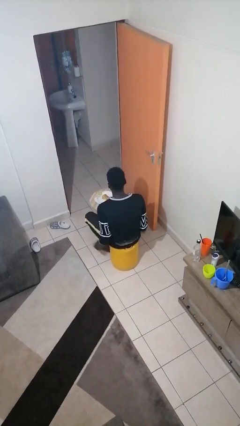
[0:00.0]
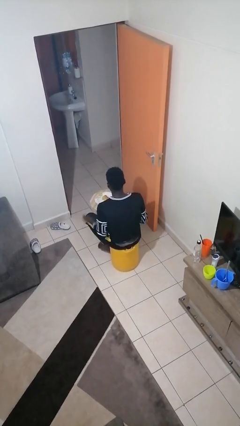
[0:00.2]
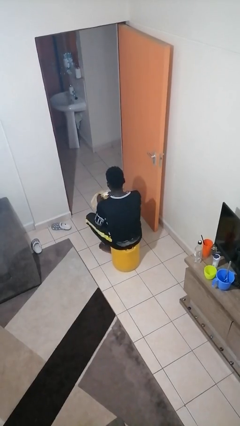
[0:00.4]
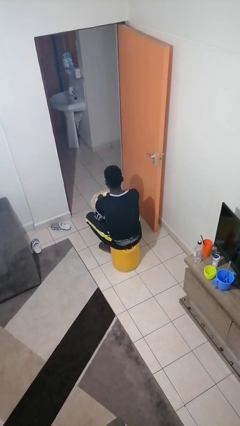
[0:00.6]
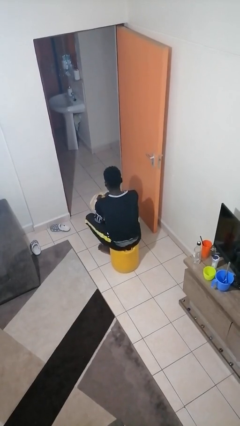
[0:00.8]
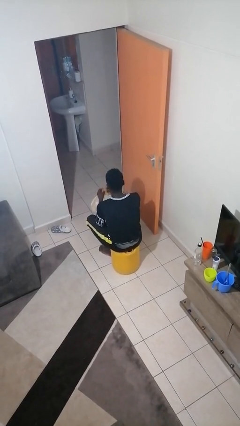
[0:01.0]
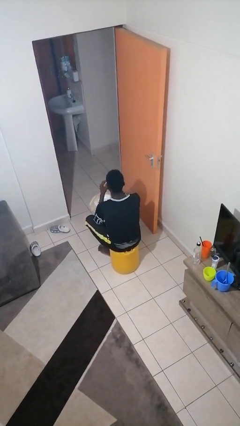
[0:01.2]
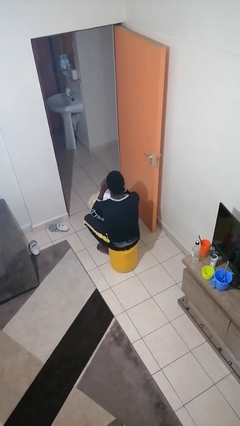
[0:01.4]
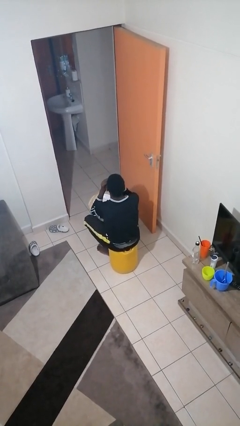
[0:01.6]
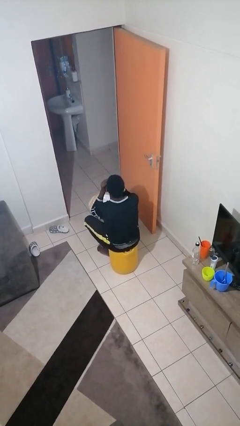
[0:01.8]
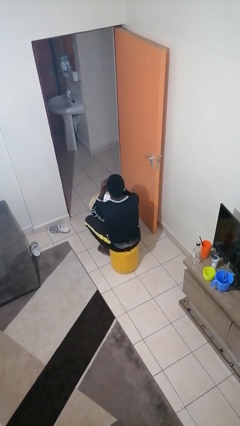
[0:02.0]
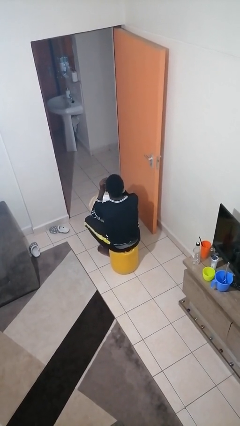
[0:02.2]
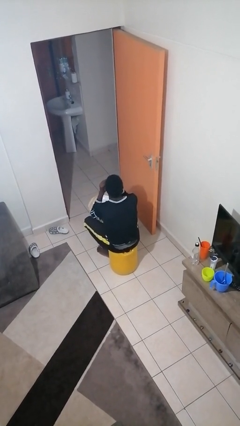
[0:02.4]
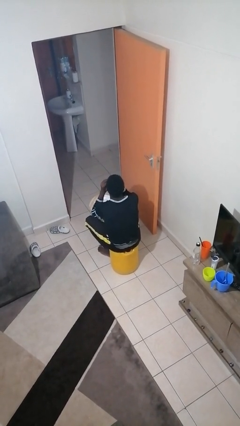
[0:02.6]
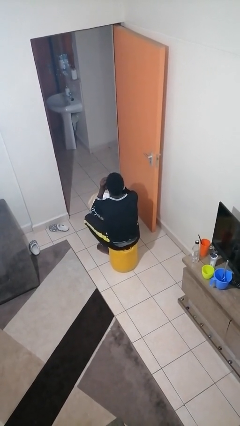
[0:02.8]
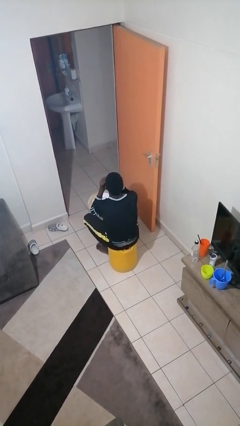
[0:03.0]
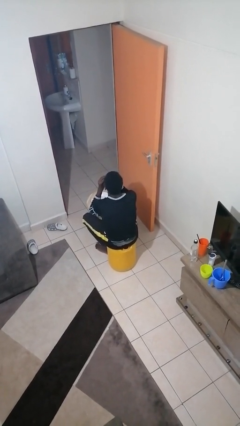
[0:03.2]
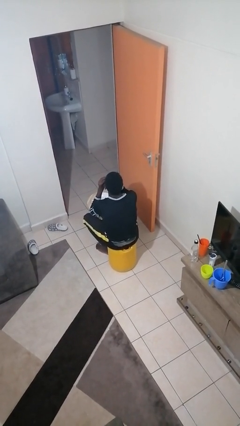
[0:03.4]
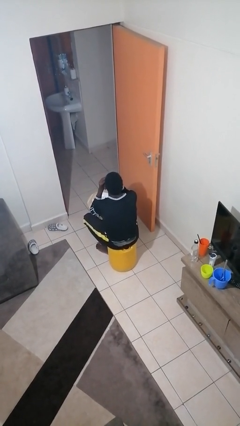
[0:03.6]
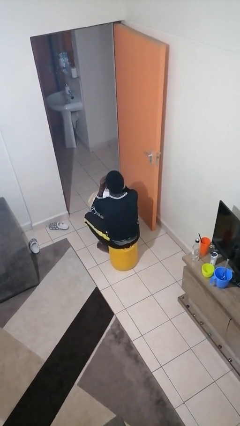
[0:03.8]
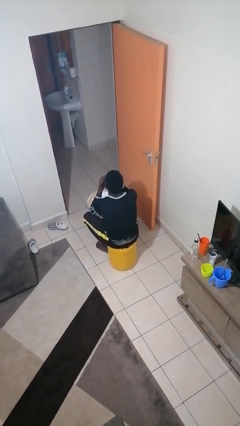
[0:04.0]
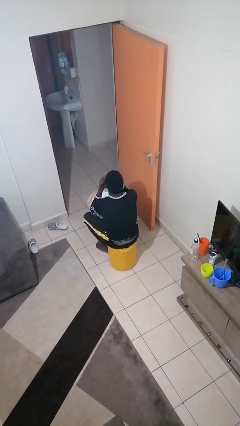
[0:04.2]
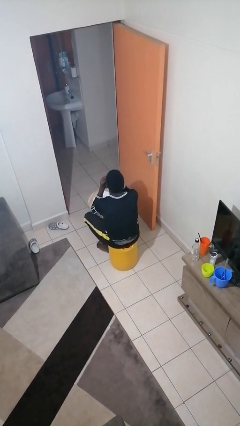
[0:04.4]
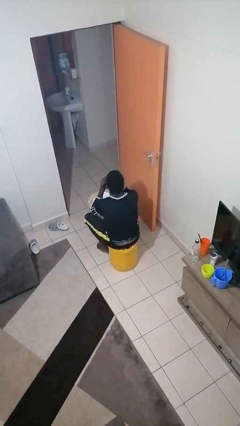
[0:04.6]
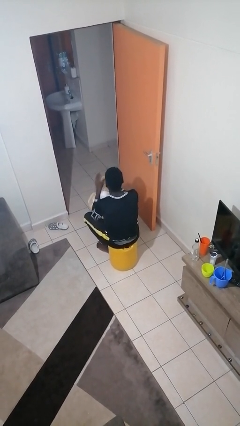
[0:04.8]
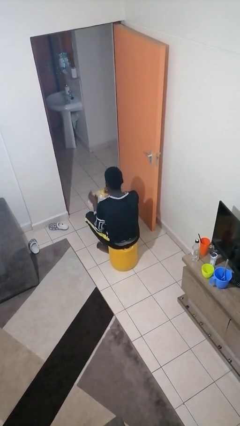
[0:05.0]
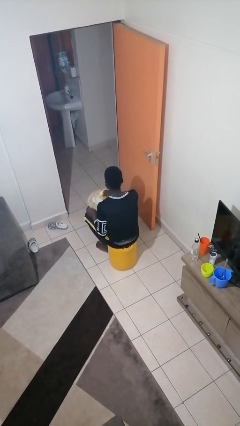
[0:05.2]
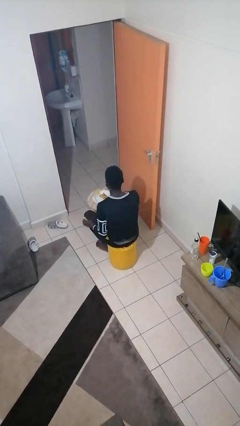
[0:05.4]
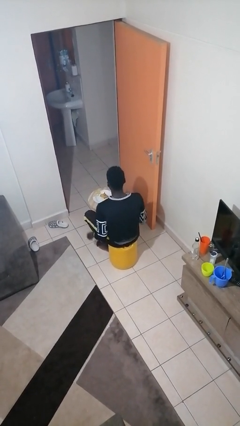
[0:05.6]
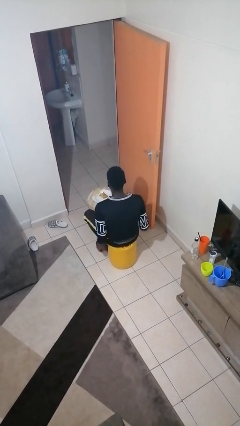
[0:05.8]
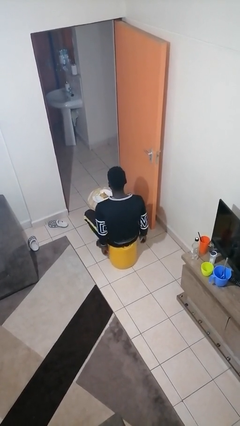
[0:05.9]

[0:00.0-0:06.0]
person eats with hands

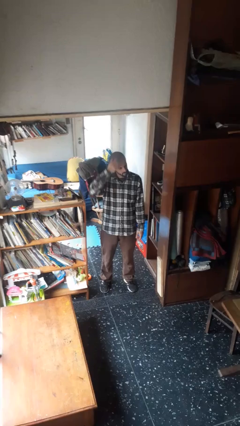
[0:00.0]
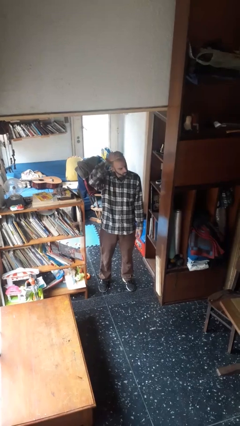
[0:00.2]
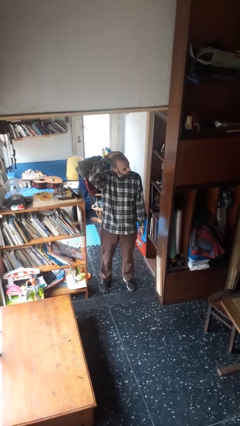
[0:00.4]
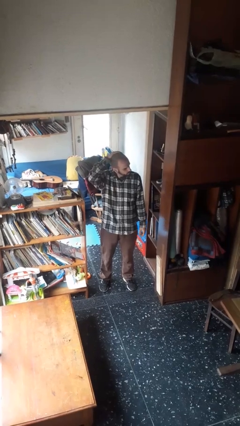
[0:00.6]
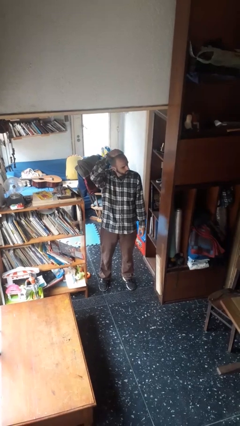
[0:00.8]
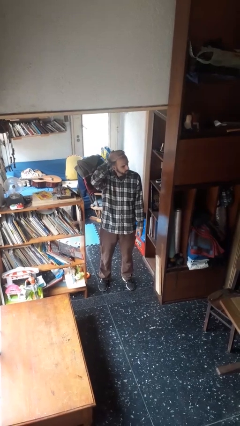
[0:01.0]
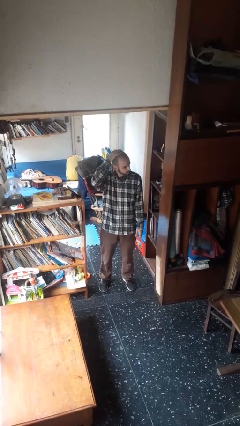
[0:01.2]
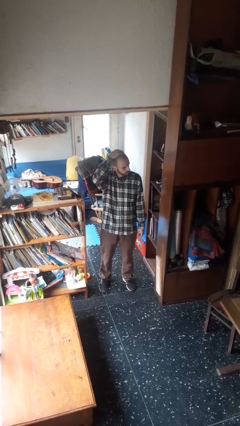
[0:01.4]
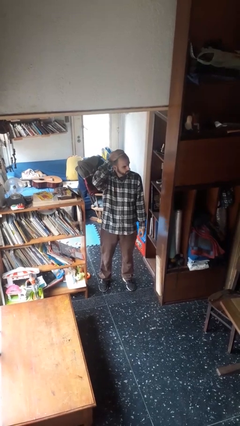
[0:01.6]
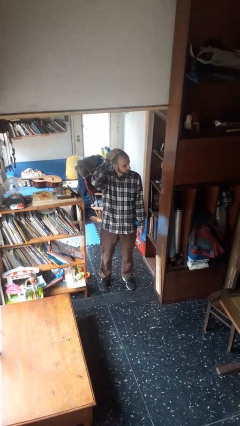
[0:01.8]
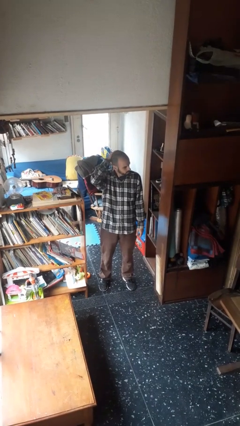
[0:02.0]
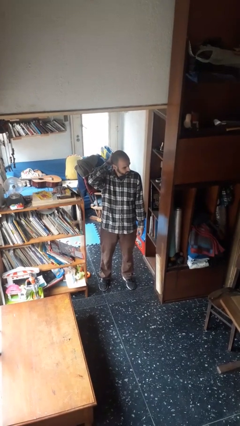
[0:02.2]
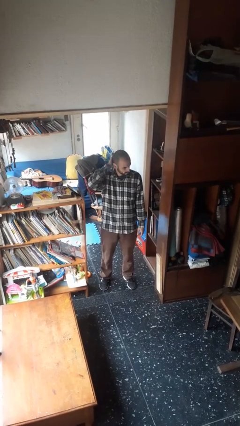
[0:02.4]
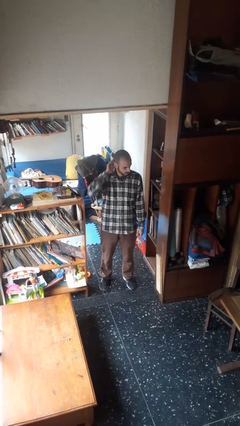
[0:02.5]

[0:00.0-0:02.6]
person pats head

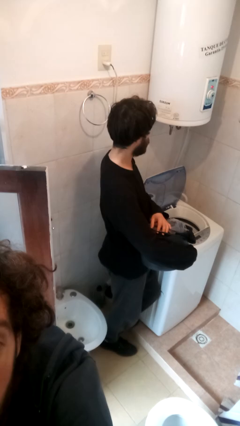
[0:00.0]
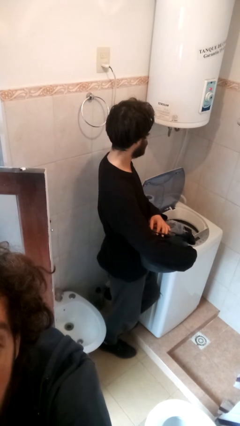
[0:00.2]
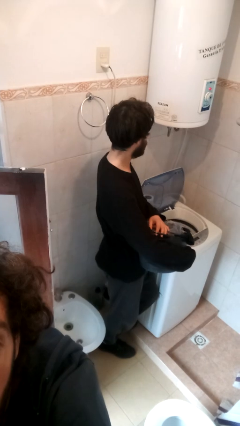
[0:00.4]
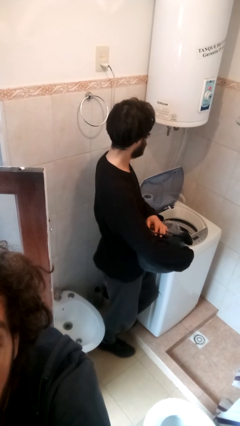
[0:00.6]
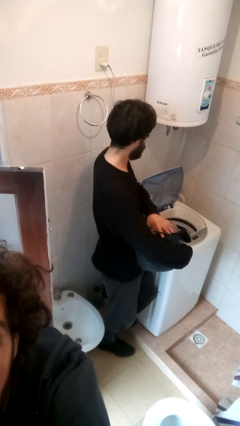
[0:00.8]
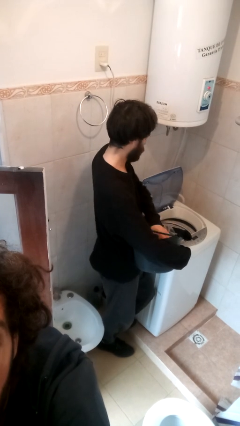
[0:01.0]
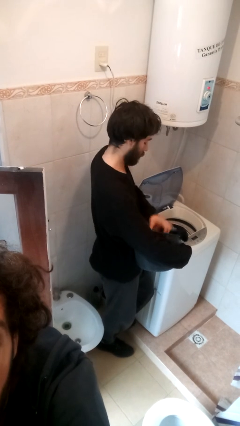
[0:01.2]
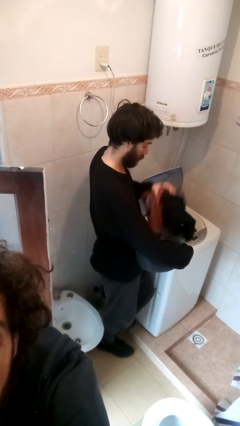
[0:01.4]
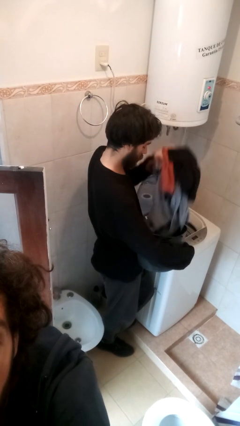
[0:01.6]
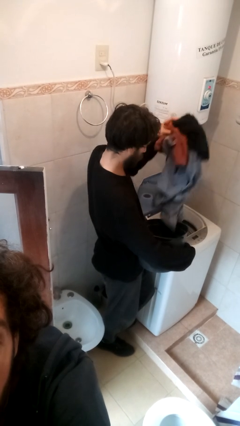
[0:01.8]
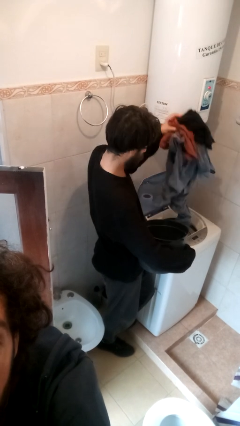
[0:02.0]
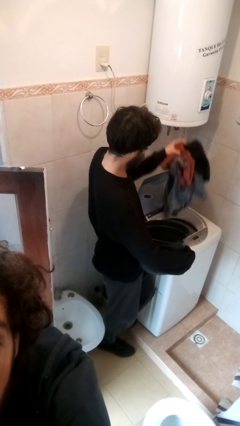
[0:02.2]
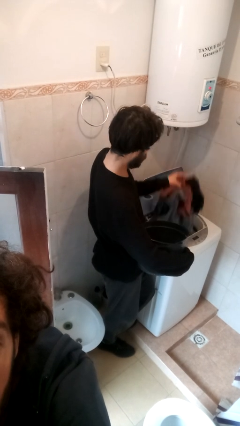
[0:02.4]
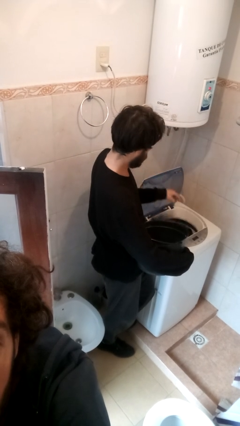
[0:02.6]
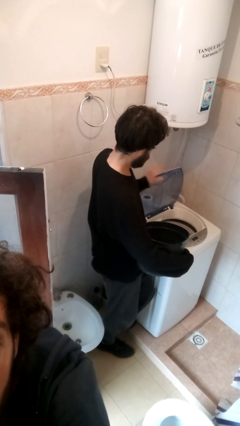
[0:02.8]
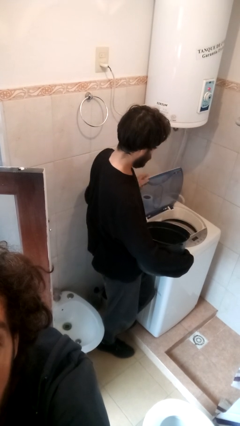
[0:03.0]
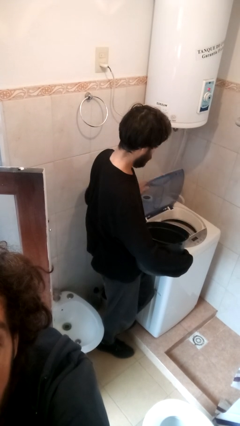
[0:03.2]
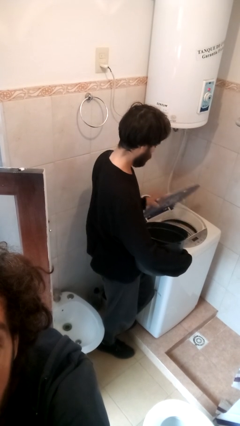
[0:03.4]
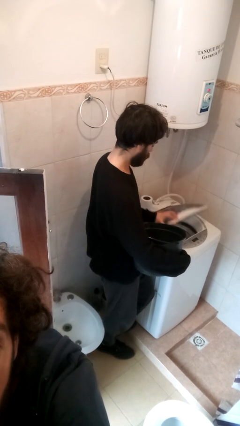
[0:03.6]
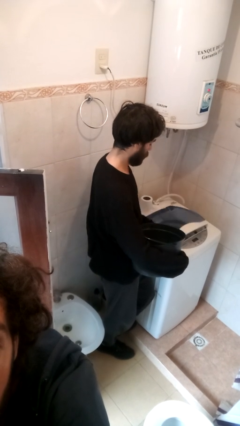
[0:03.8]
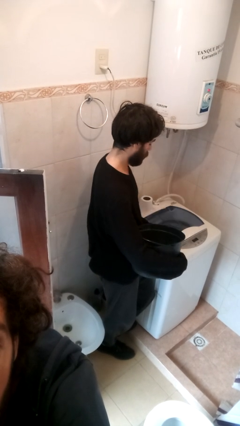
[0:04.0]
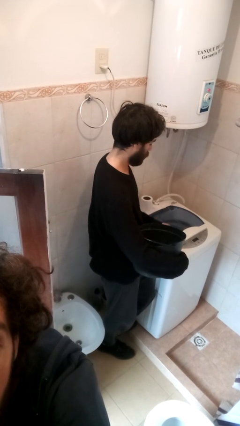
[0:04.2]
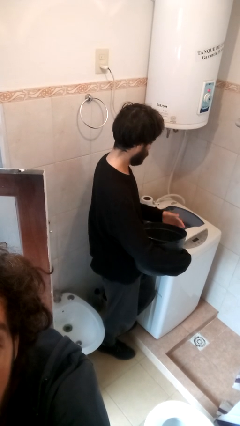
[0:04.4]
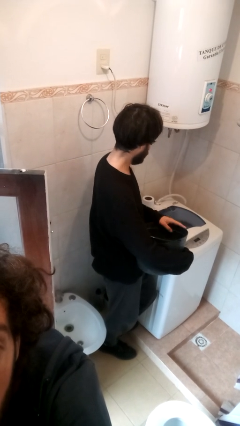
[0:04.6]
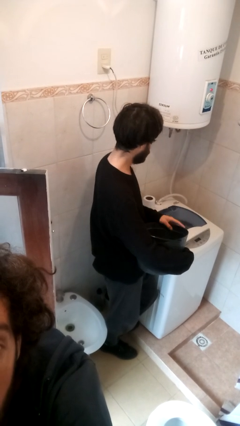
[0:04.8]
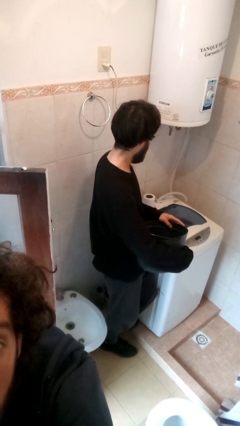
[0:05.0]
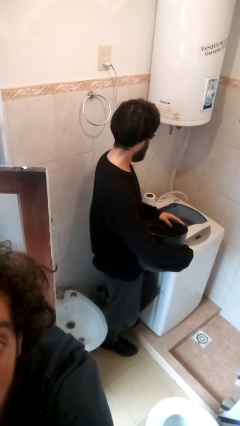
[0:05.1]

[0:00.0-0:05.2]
person loads clotheswasher

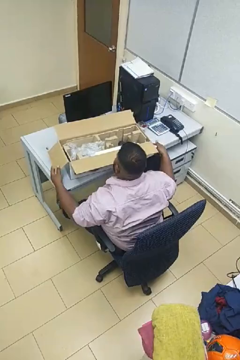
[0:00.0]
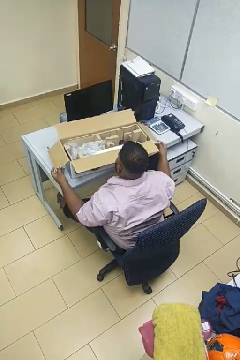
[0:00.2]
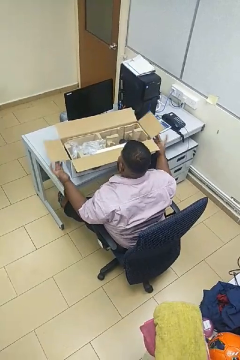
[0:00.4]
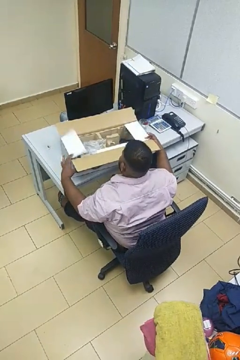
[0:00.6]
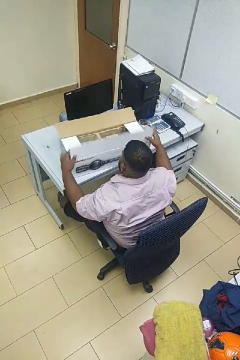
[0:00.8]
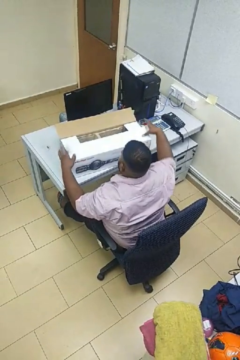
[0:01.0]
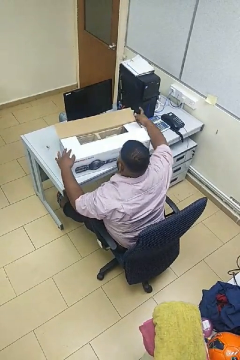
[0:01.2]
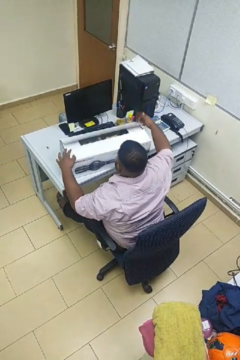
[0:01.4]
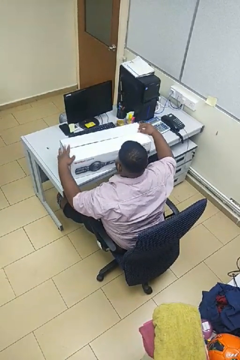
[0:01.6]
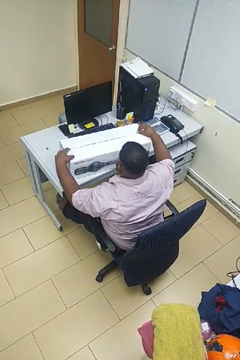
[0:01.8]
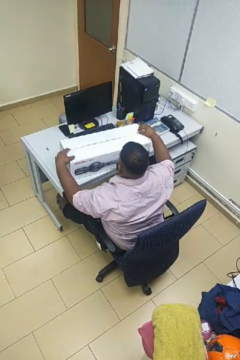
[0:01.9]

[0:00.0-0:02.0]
person closes box

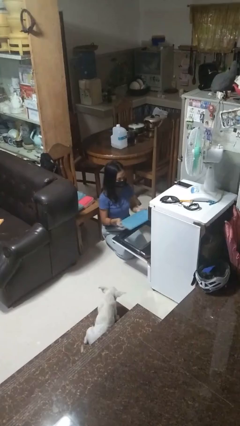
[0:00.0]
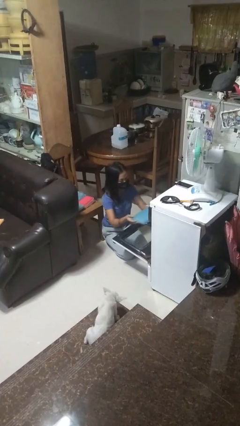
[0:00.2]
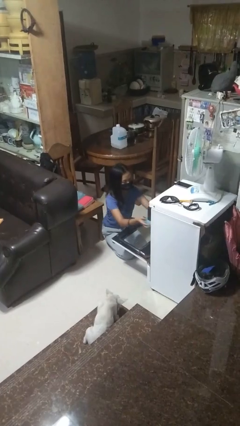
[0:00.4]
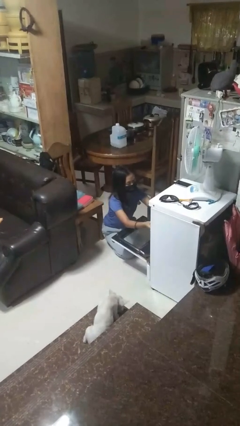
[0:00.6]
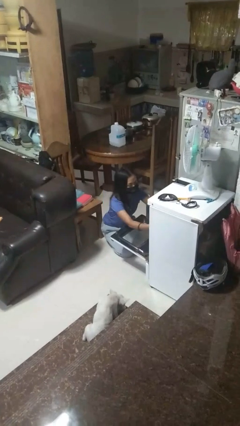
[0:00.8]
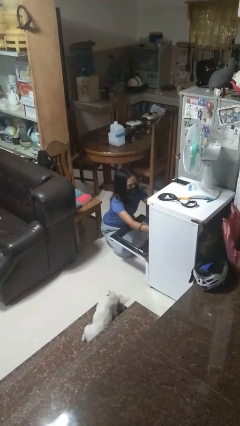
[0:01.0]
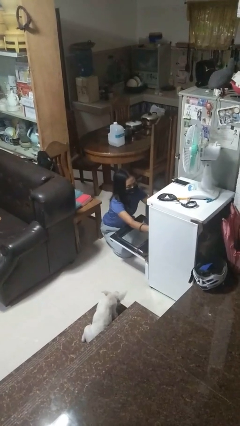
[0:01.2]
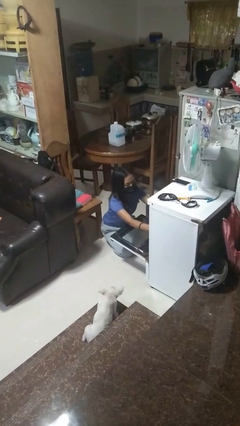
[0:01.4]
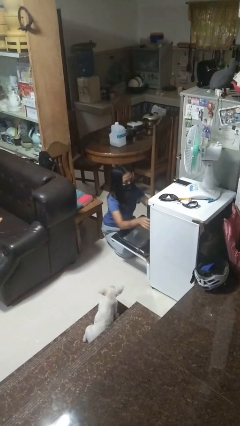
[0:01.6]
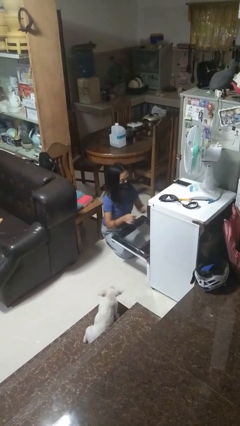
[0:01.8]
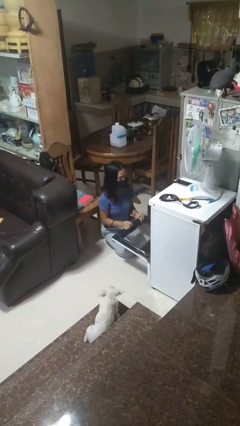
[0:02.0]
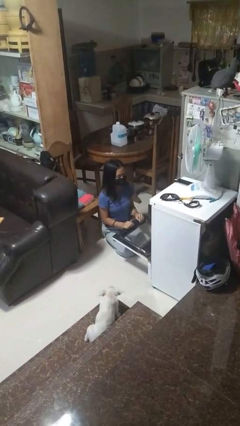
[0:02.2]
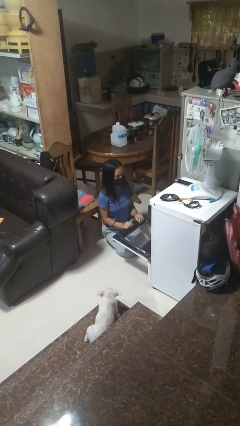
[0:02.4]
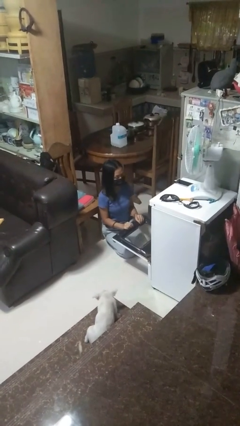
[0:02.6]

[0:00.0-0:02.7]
person puts object into oven
